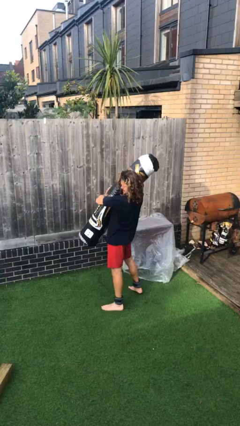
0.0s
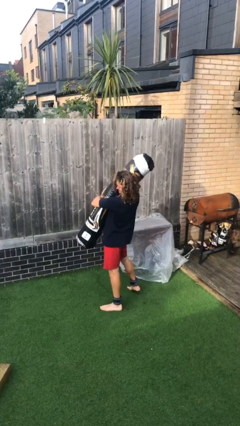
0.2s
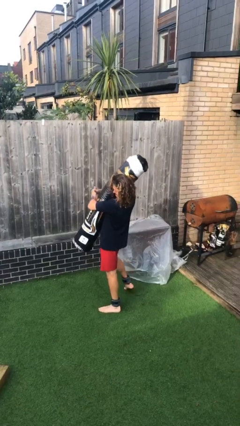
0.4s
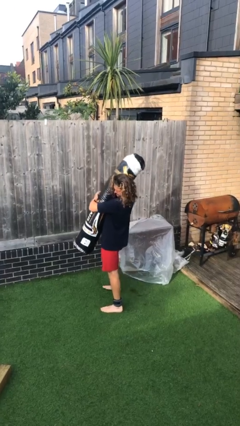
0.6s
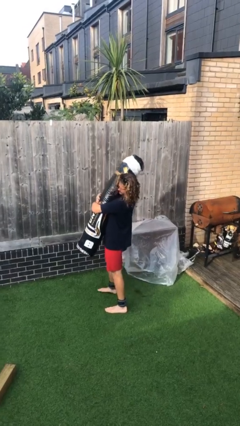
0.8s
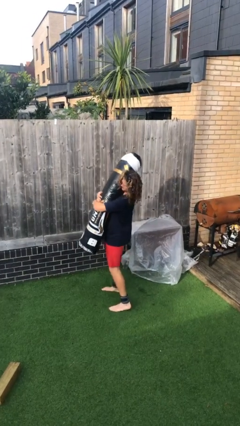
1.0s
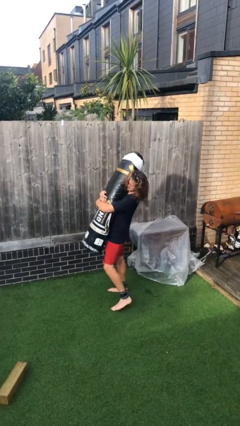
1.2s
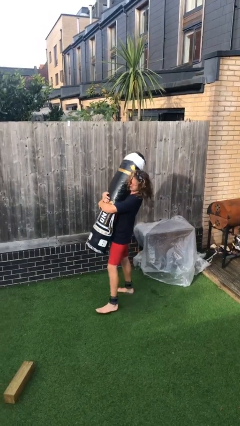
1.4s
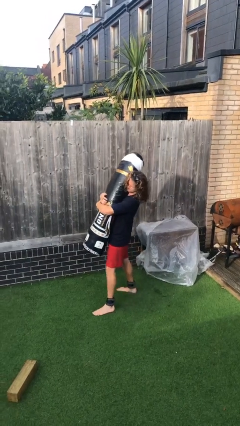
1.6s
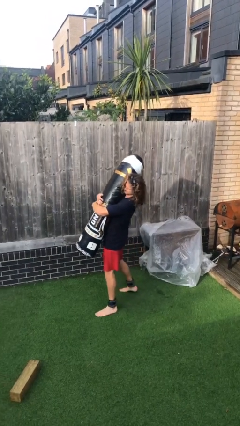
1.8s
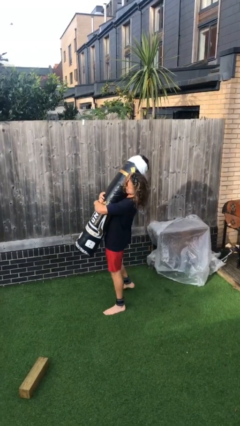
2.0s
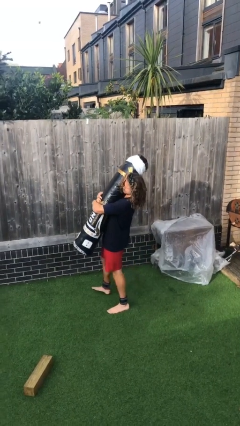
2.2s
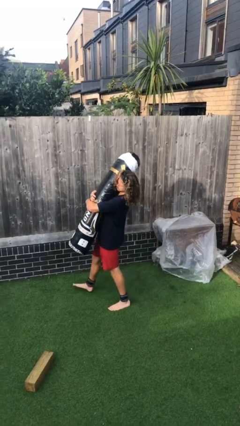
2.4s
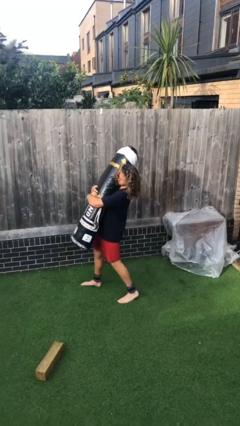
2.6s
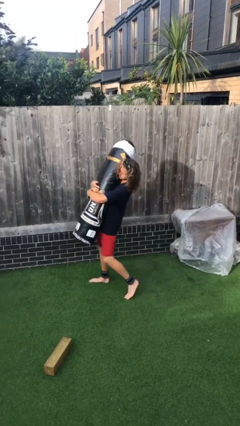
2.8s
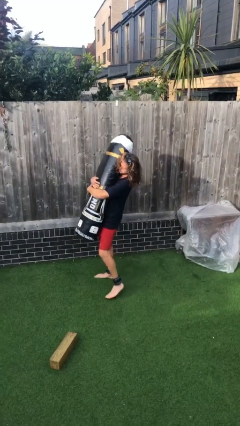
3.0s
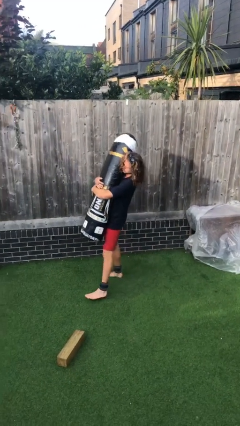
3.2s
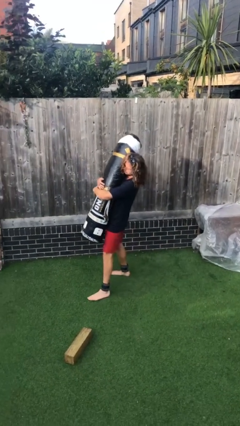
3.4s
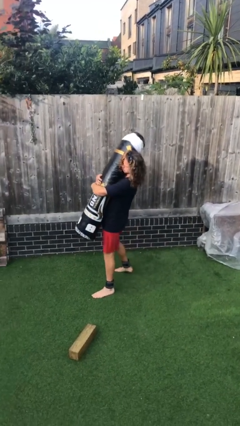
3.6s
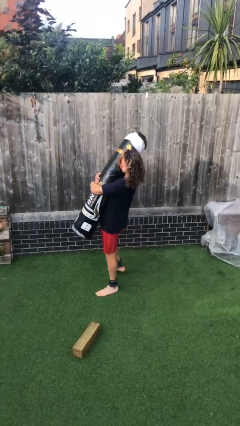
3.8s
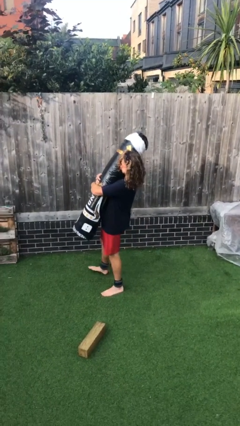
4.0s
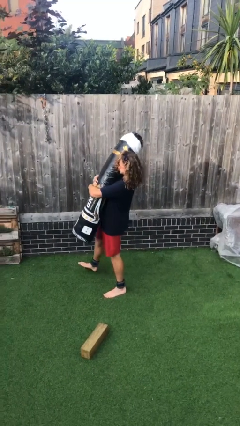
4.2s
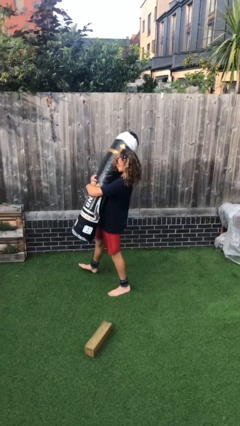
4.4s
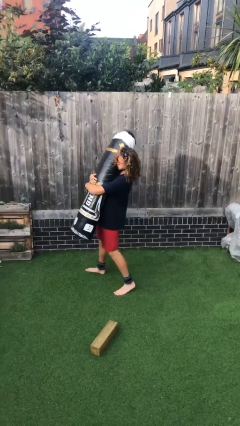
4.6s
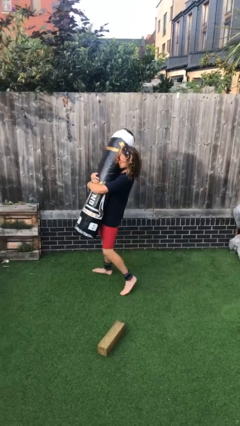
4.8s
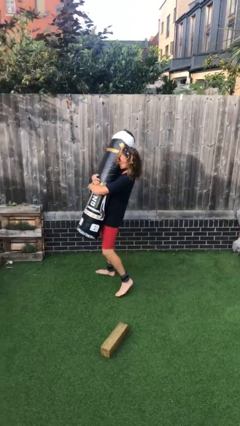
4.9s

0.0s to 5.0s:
person carries heavy object

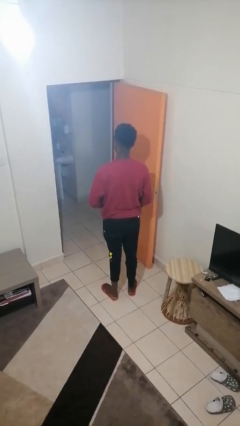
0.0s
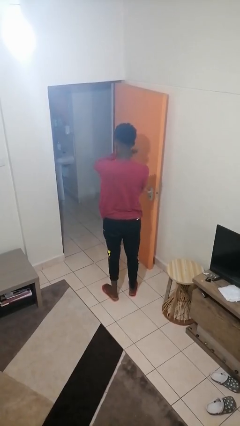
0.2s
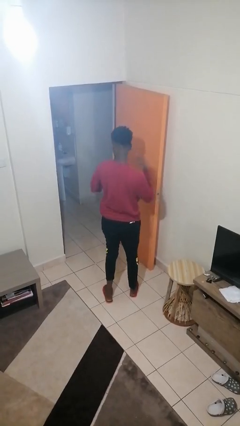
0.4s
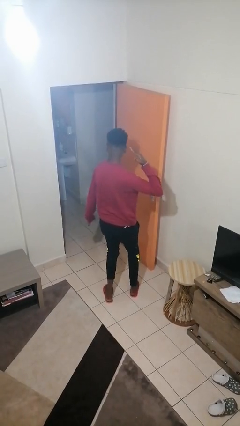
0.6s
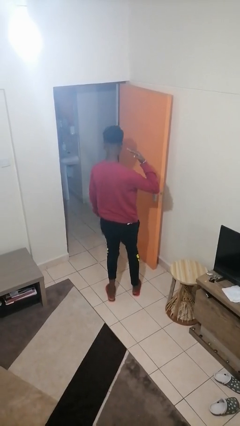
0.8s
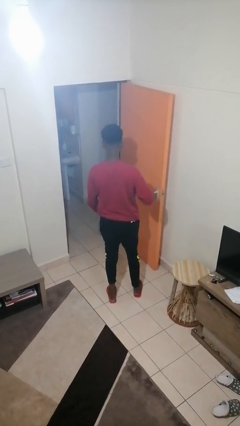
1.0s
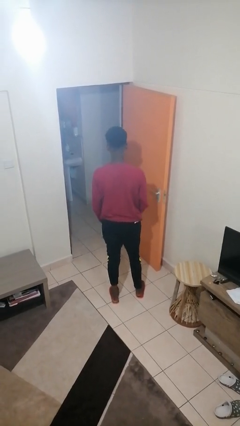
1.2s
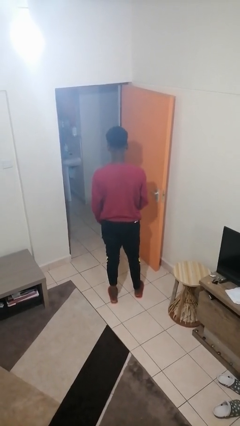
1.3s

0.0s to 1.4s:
person karate chop

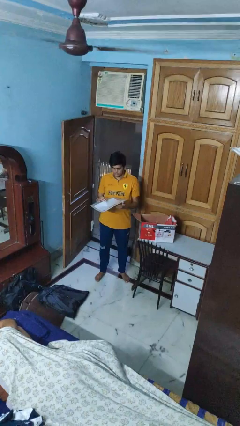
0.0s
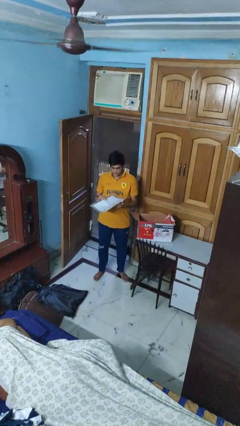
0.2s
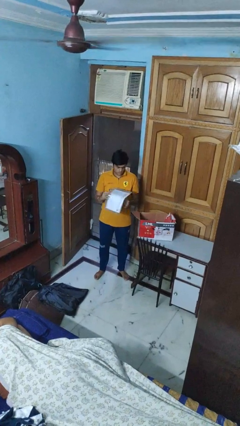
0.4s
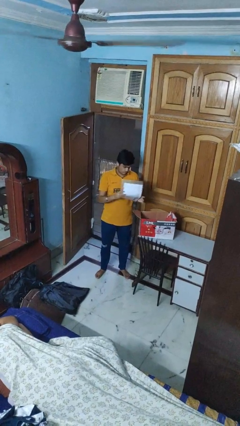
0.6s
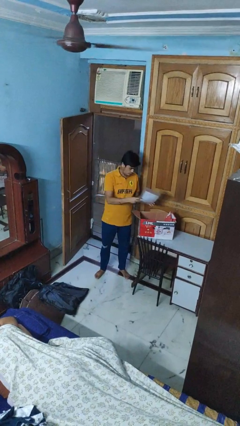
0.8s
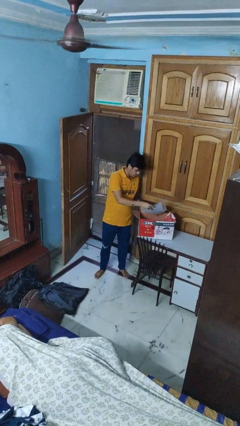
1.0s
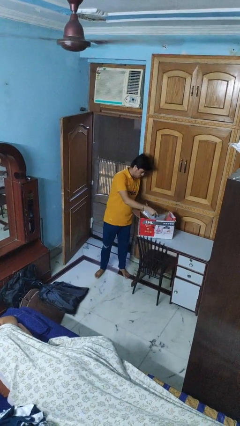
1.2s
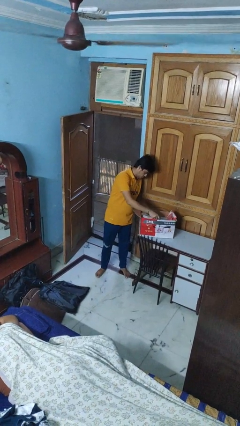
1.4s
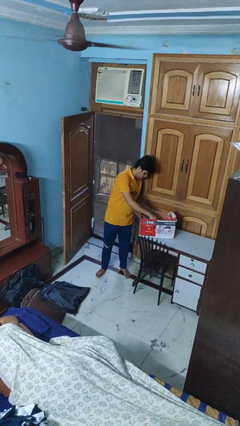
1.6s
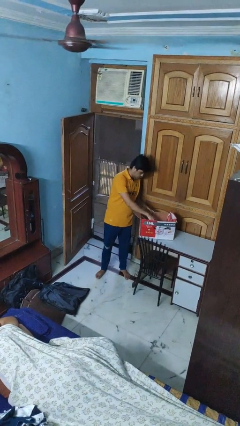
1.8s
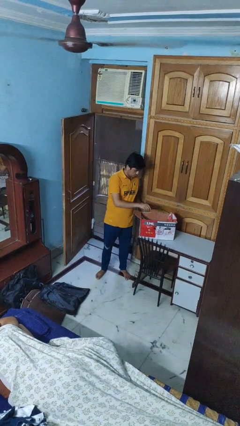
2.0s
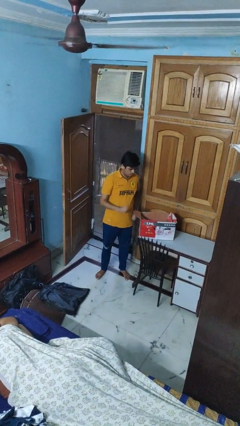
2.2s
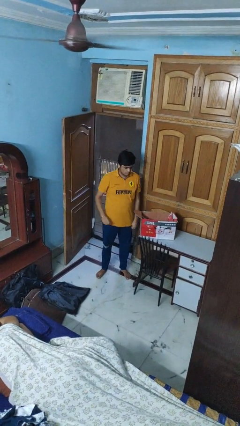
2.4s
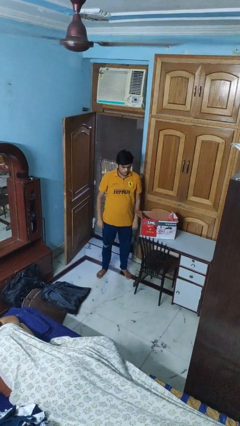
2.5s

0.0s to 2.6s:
person puts object into box

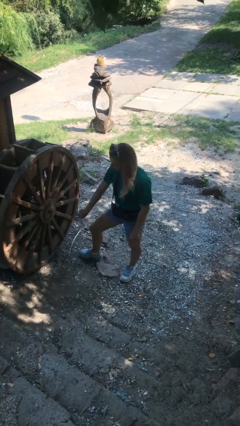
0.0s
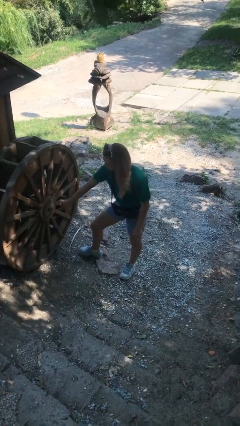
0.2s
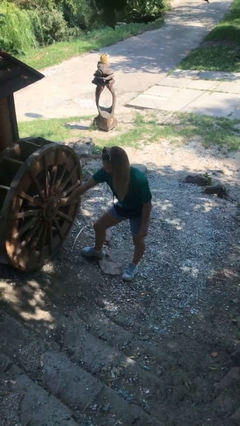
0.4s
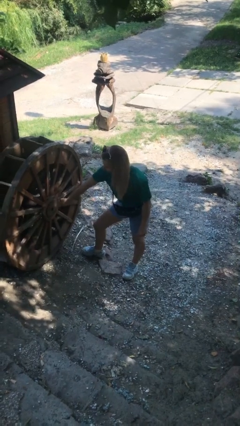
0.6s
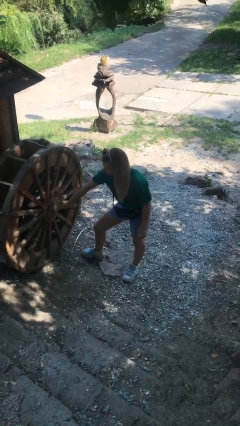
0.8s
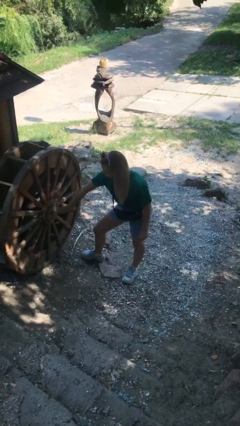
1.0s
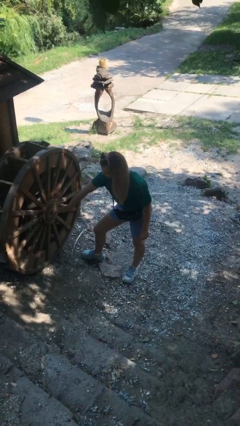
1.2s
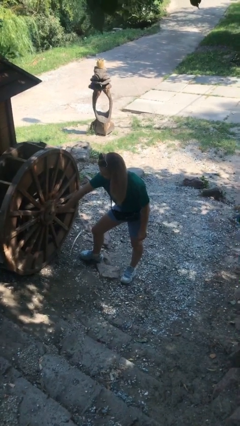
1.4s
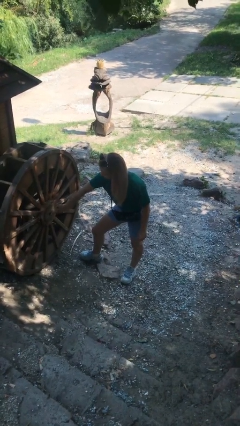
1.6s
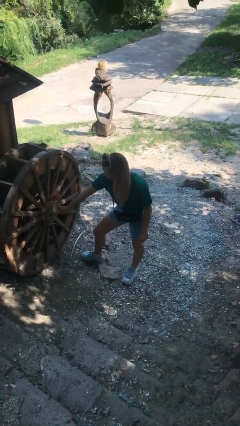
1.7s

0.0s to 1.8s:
person taps object with finger

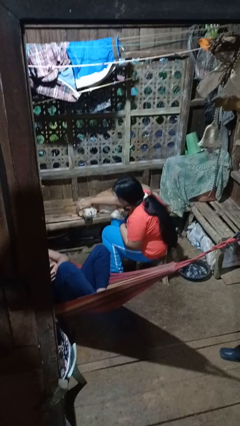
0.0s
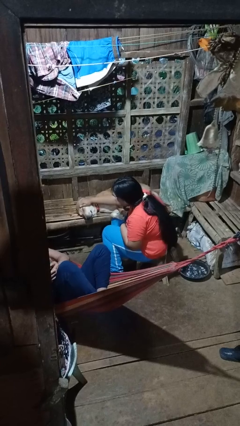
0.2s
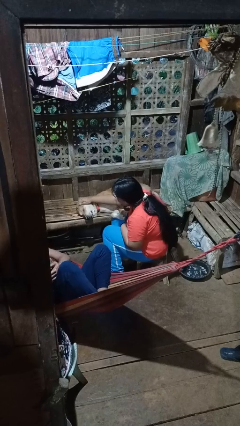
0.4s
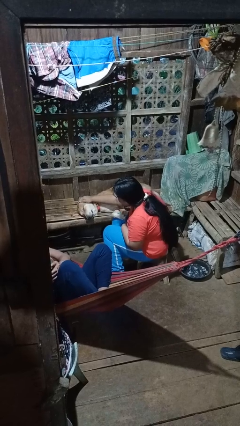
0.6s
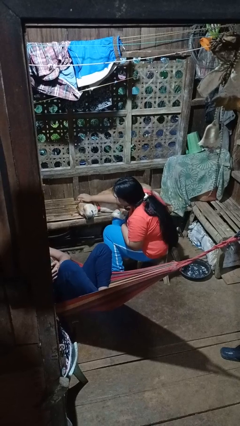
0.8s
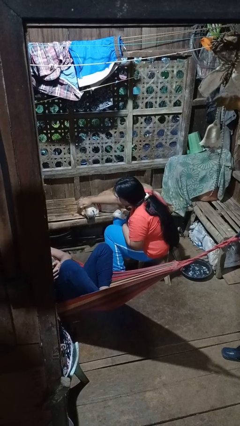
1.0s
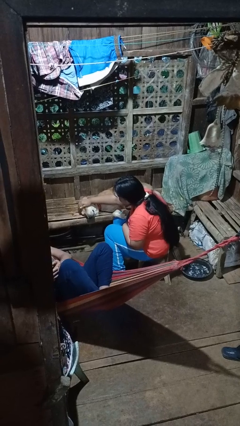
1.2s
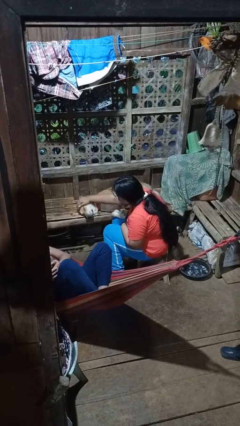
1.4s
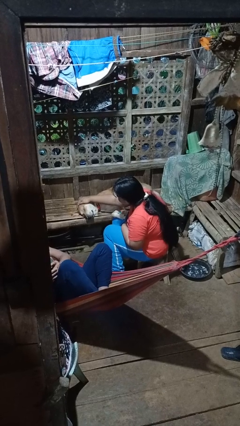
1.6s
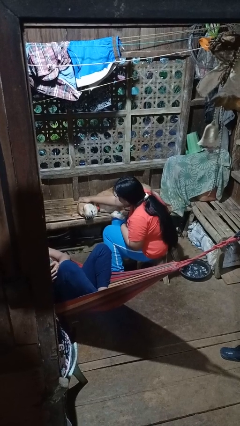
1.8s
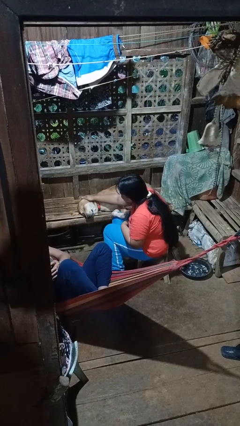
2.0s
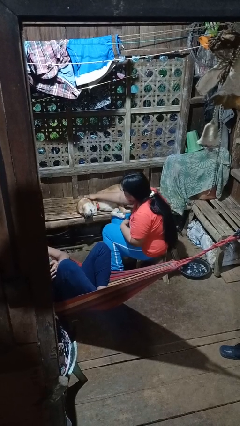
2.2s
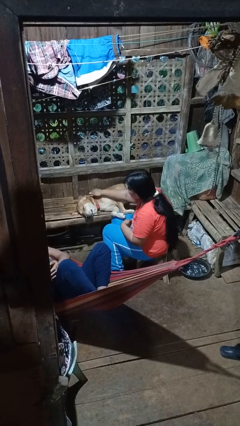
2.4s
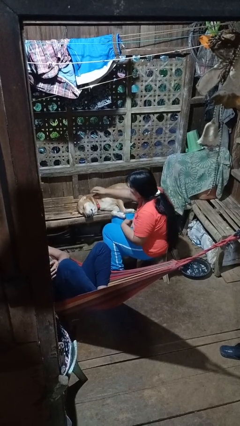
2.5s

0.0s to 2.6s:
person pets dog

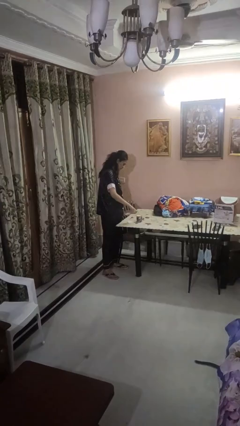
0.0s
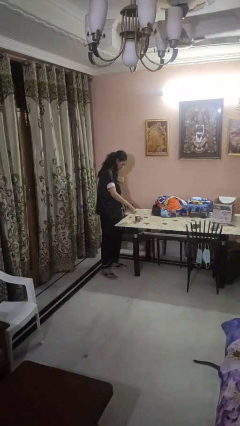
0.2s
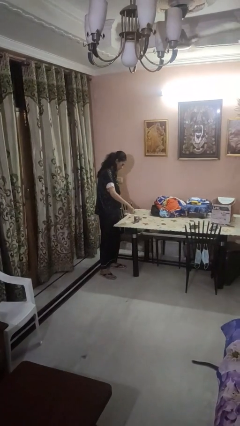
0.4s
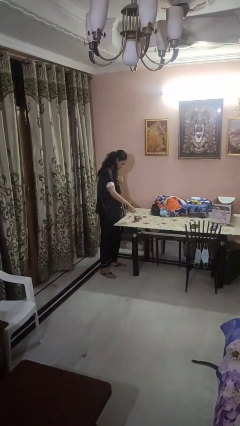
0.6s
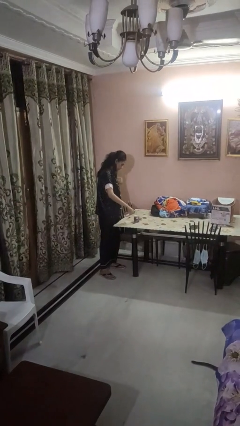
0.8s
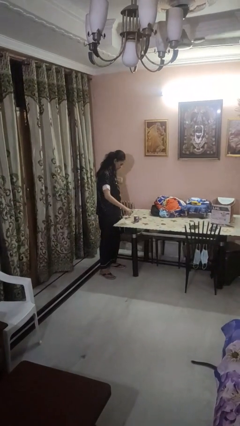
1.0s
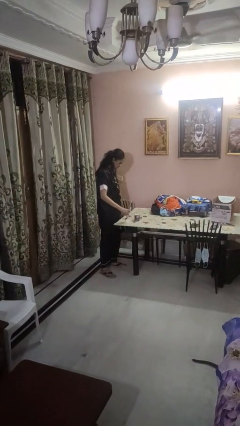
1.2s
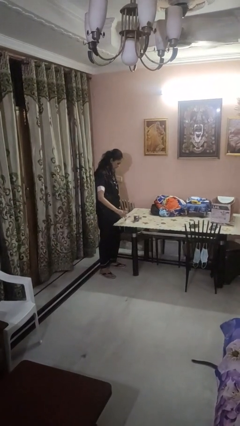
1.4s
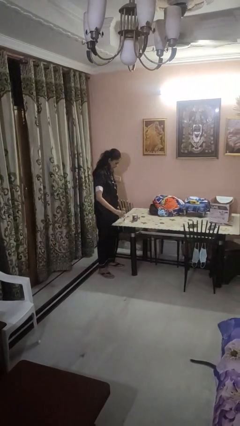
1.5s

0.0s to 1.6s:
person pours liquid into cup

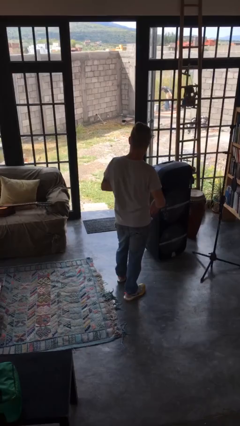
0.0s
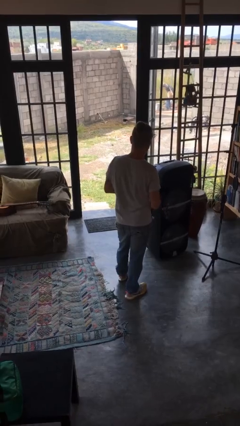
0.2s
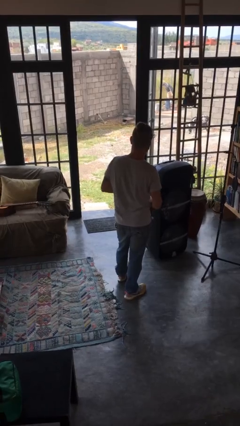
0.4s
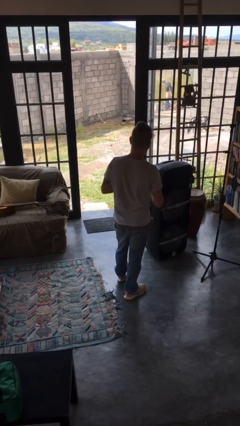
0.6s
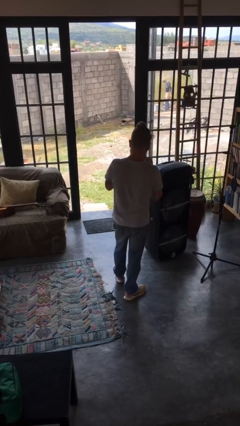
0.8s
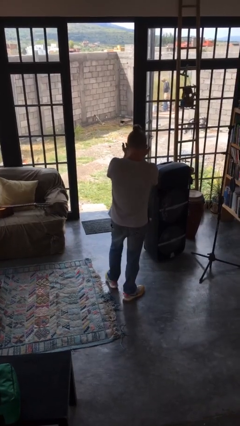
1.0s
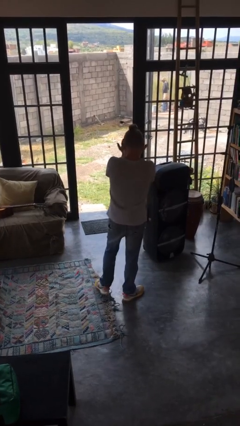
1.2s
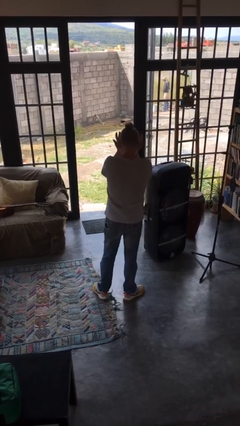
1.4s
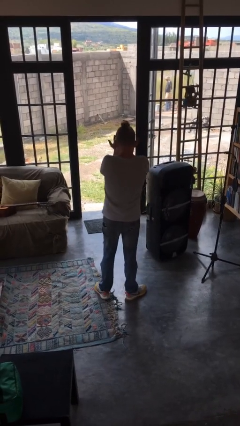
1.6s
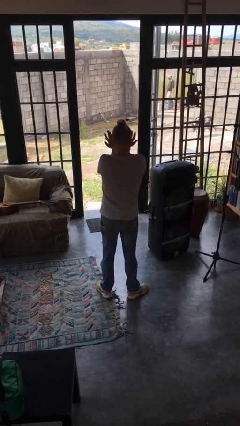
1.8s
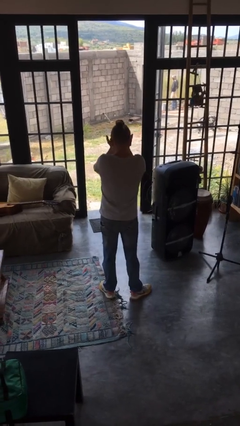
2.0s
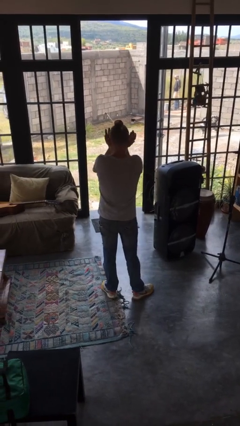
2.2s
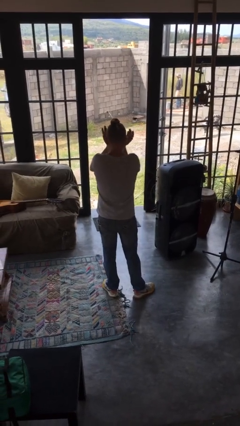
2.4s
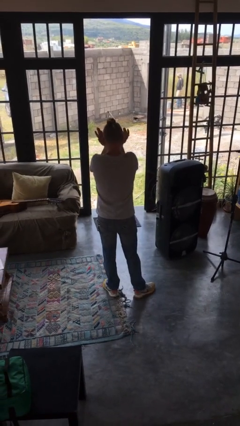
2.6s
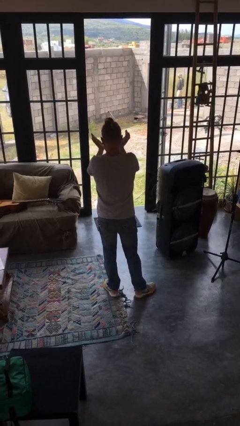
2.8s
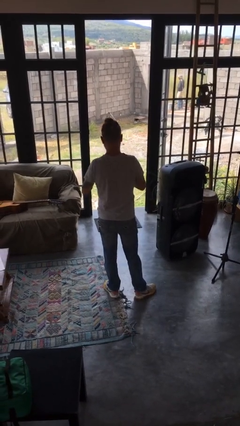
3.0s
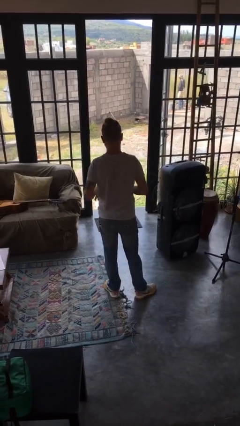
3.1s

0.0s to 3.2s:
person rubs eyes
